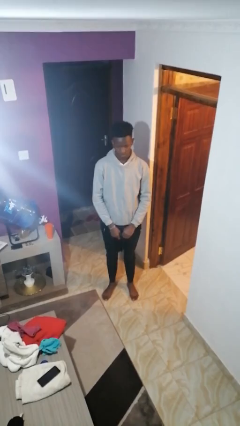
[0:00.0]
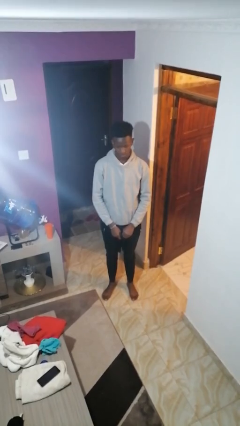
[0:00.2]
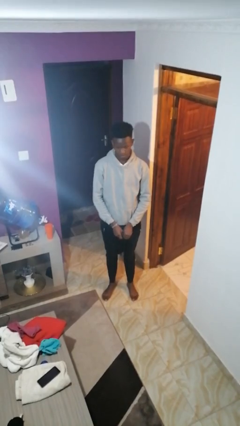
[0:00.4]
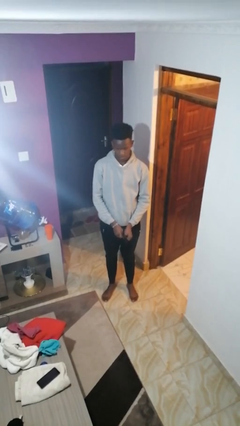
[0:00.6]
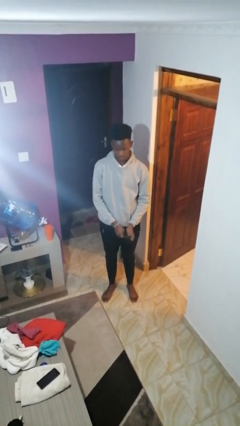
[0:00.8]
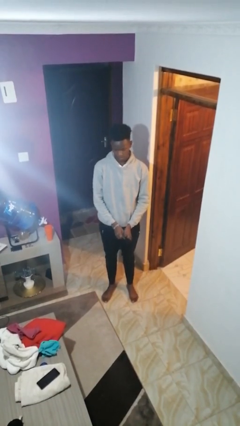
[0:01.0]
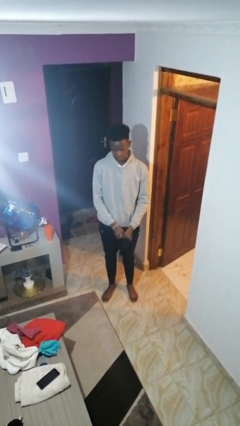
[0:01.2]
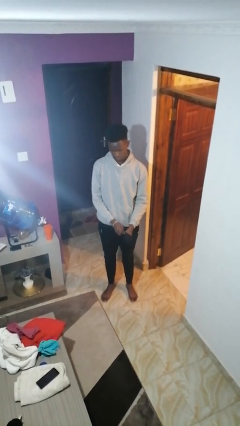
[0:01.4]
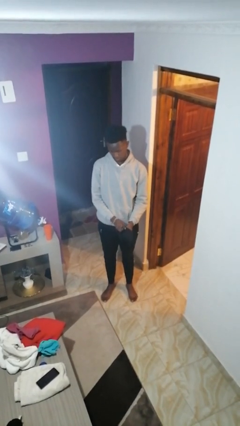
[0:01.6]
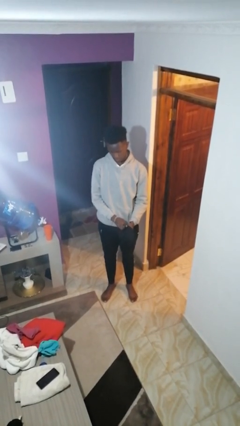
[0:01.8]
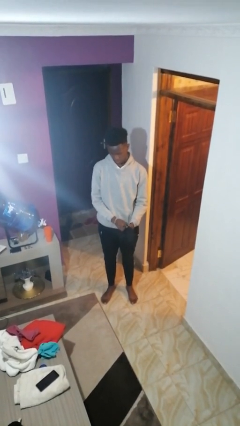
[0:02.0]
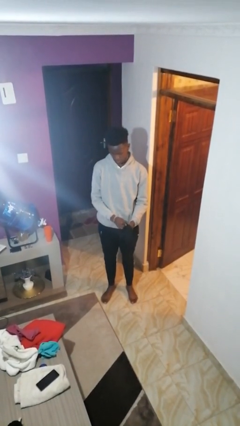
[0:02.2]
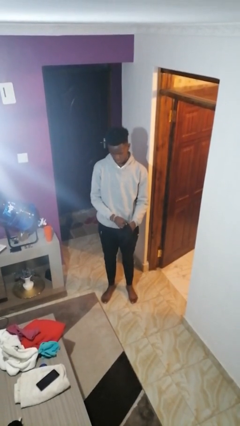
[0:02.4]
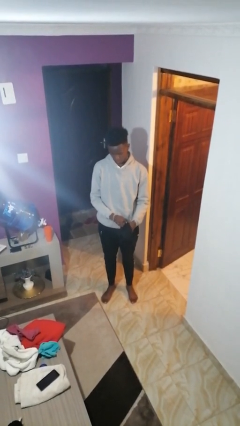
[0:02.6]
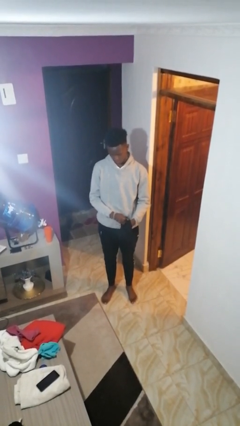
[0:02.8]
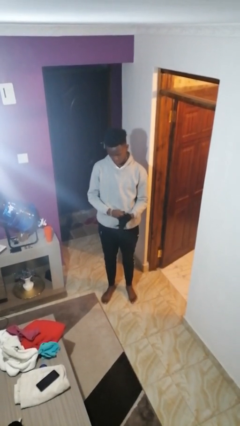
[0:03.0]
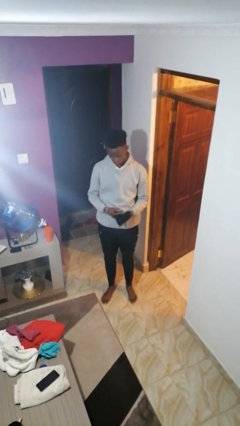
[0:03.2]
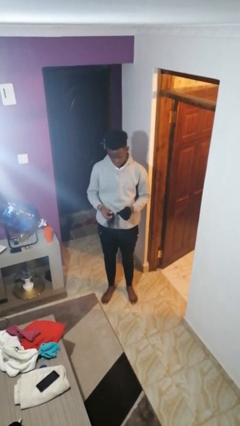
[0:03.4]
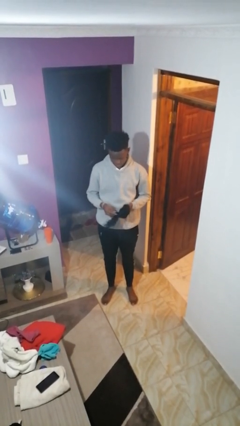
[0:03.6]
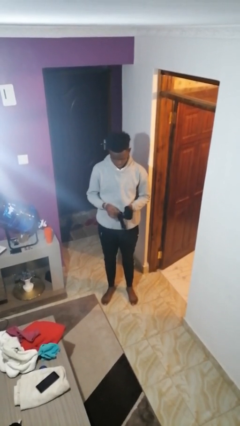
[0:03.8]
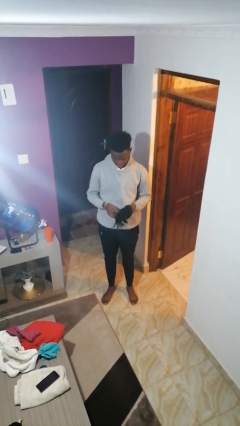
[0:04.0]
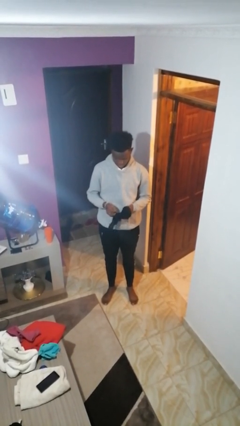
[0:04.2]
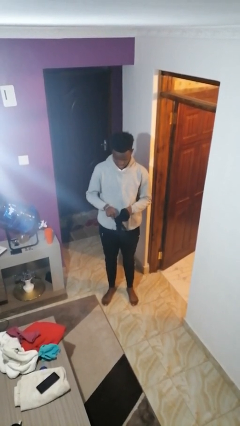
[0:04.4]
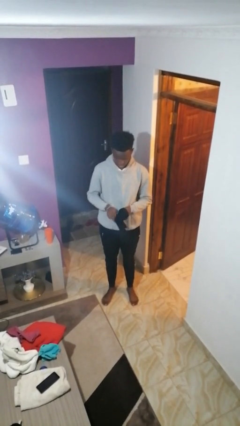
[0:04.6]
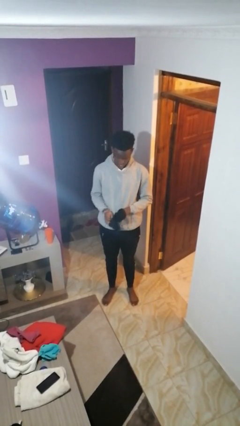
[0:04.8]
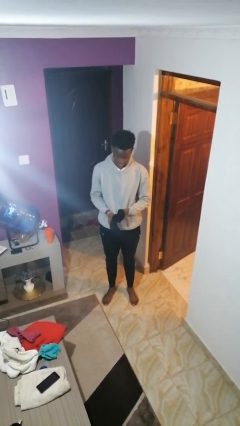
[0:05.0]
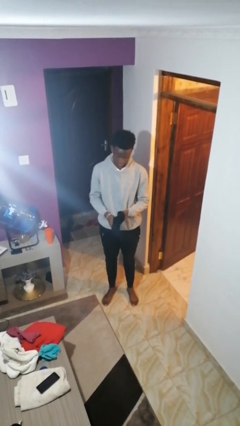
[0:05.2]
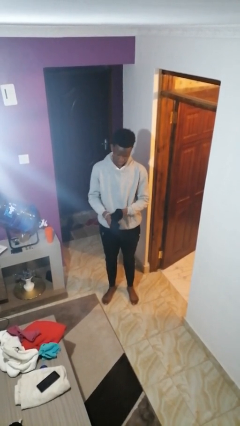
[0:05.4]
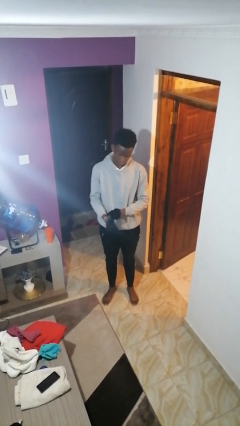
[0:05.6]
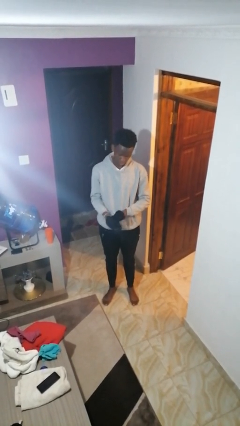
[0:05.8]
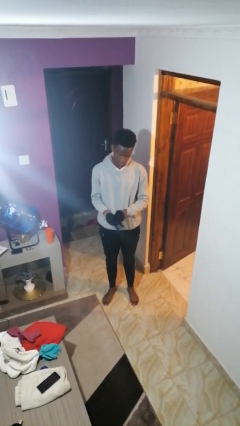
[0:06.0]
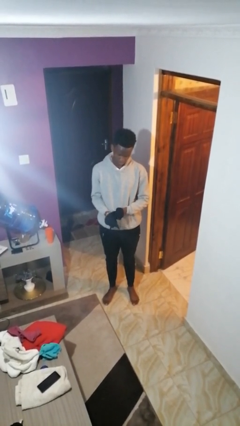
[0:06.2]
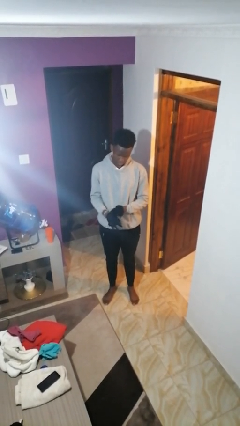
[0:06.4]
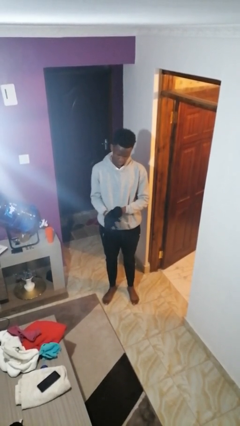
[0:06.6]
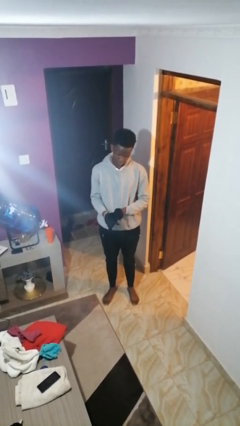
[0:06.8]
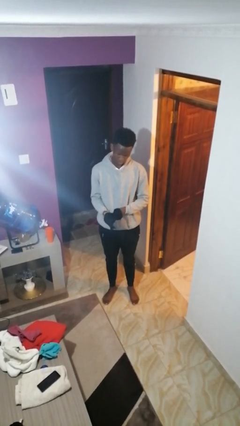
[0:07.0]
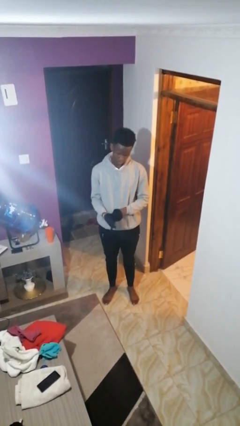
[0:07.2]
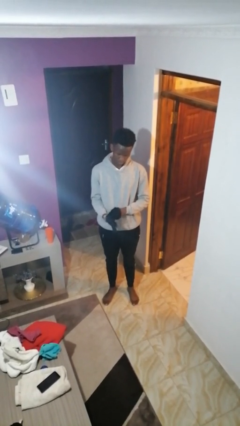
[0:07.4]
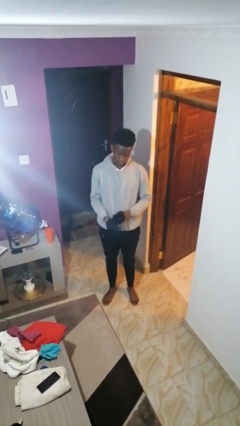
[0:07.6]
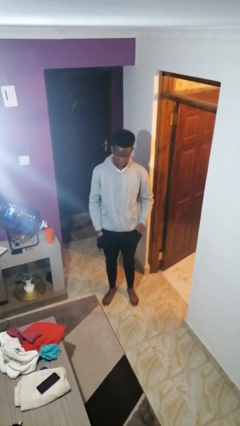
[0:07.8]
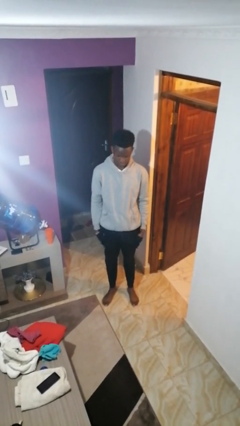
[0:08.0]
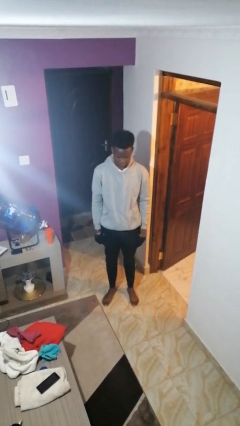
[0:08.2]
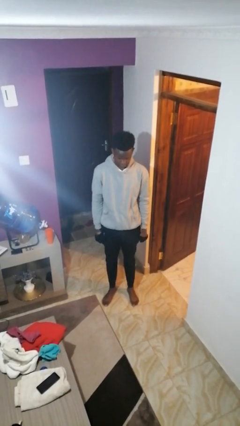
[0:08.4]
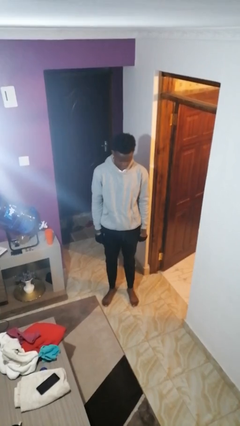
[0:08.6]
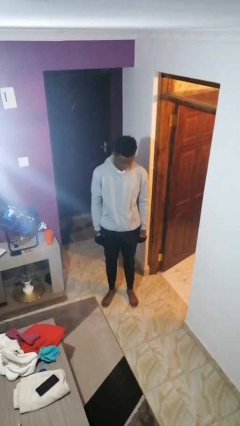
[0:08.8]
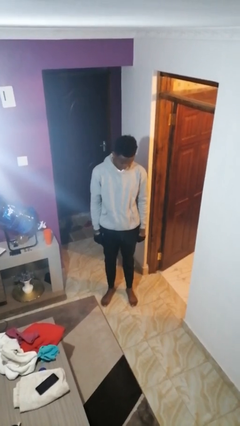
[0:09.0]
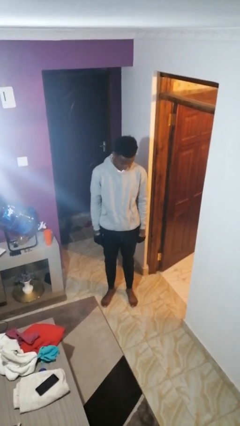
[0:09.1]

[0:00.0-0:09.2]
person puts on gloves

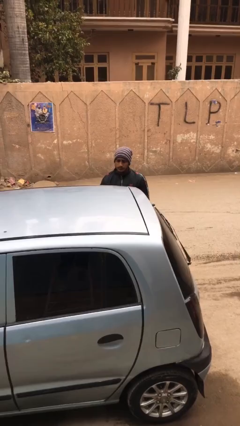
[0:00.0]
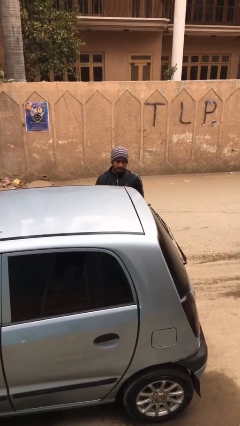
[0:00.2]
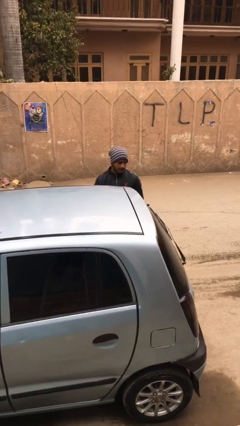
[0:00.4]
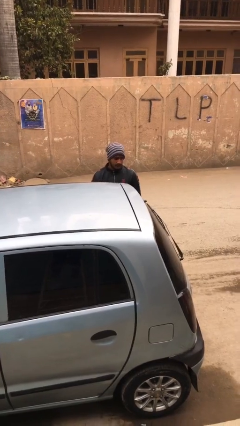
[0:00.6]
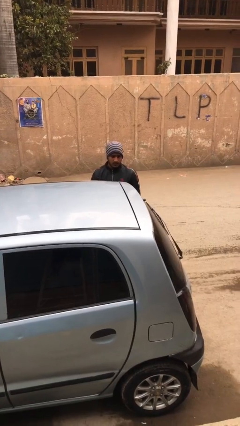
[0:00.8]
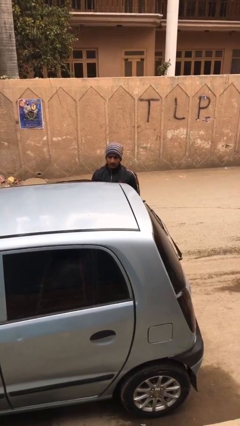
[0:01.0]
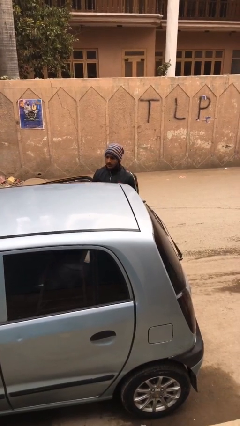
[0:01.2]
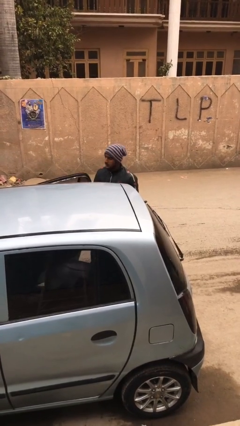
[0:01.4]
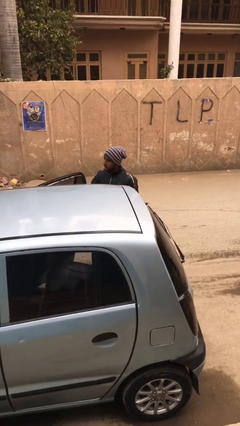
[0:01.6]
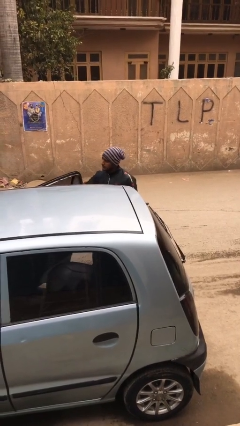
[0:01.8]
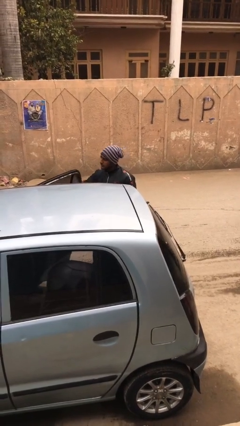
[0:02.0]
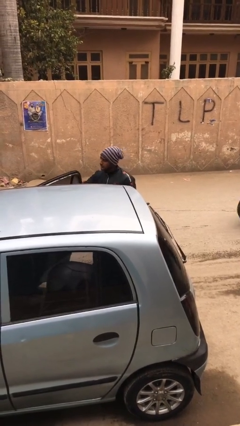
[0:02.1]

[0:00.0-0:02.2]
person opens car door

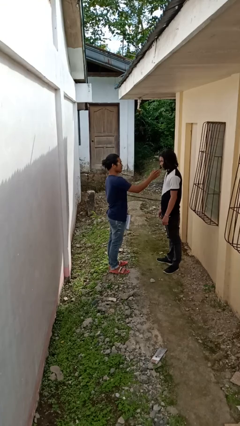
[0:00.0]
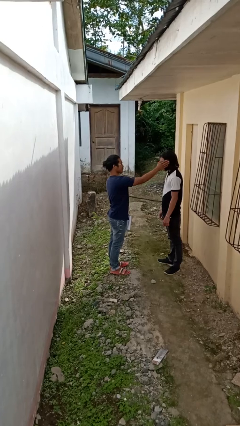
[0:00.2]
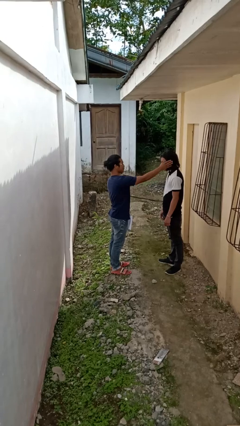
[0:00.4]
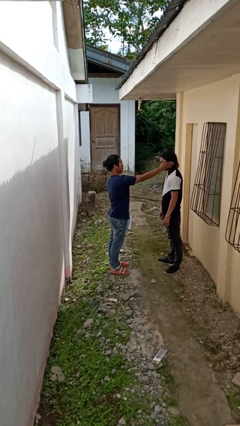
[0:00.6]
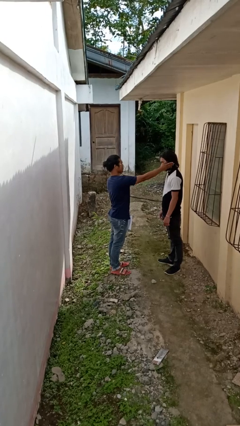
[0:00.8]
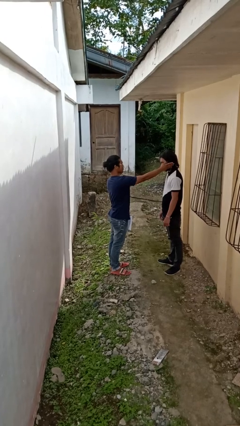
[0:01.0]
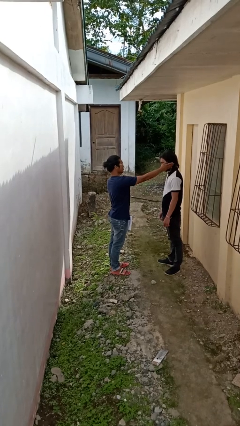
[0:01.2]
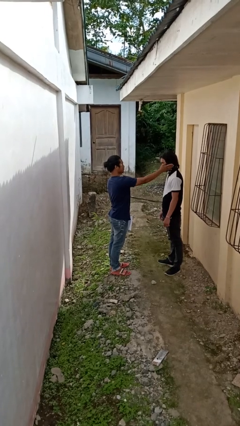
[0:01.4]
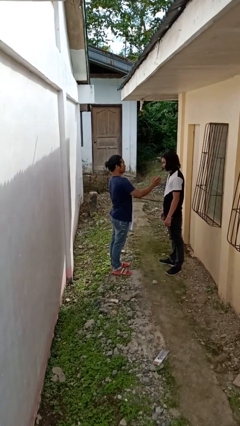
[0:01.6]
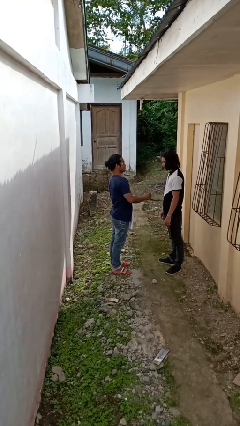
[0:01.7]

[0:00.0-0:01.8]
person touches face of person

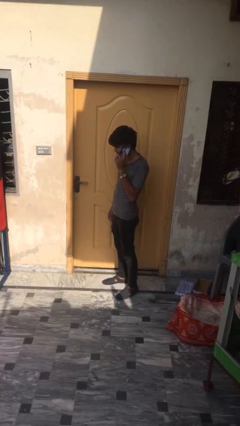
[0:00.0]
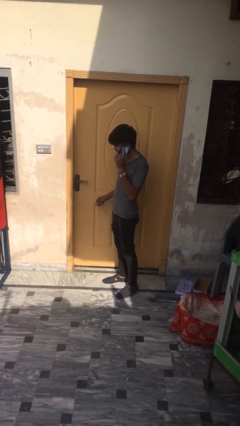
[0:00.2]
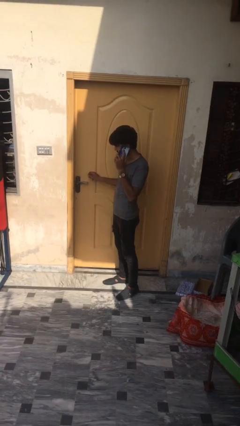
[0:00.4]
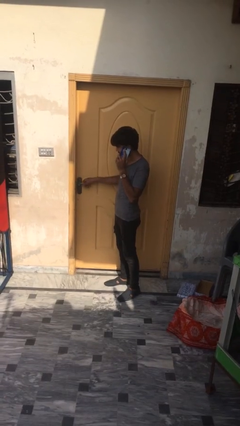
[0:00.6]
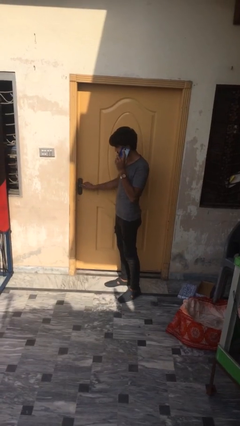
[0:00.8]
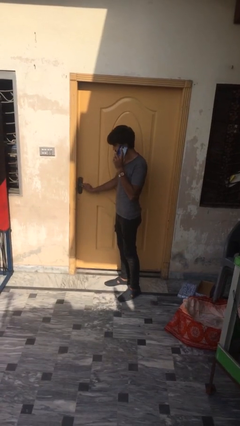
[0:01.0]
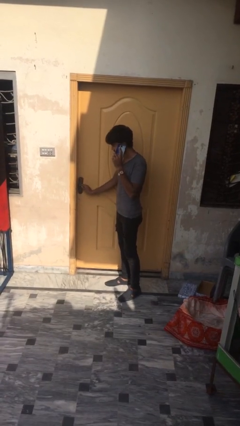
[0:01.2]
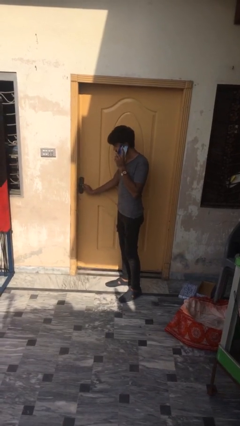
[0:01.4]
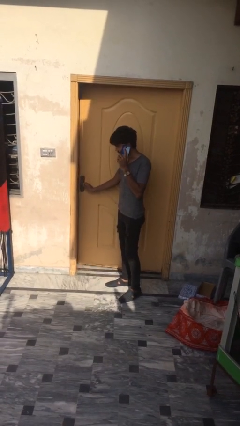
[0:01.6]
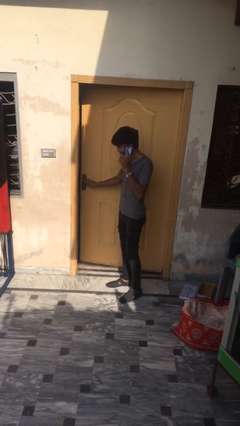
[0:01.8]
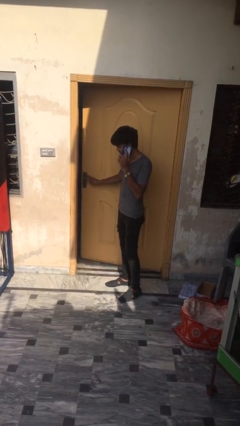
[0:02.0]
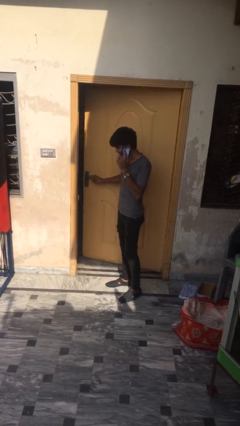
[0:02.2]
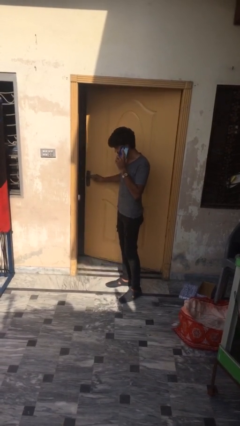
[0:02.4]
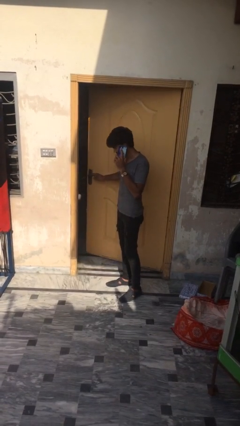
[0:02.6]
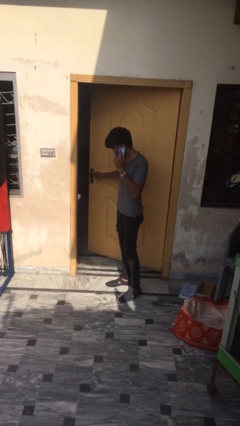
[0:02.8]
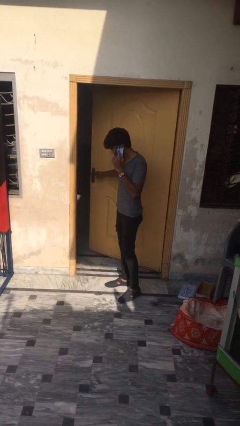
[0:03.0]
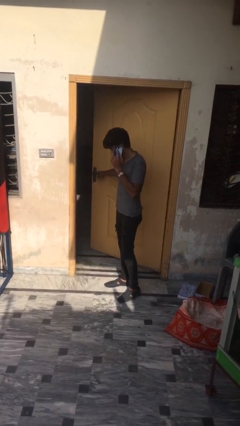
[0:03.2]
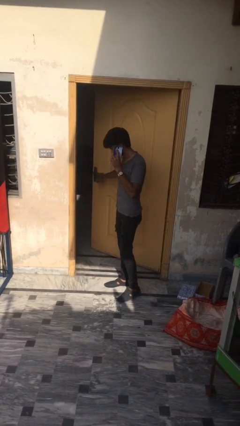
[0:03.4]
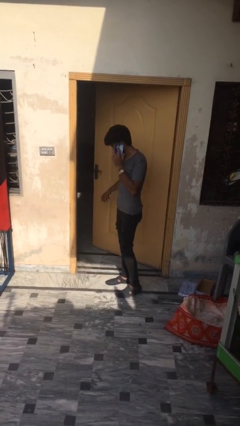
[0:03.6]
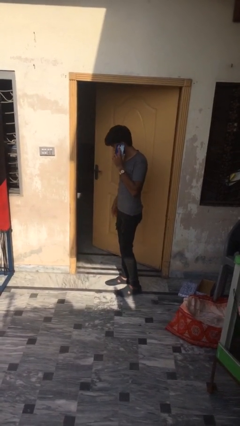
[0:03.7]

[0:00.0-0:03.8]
person opens facility door

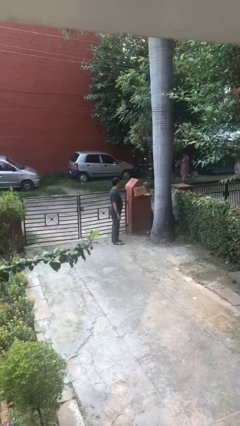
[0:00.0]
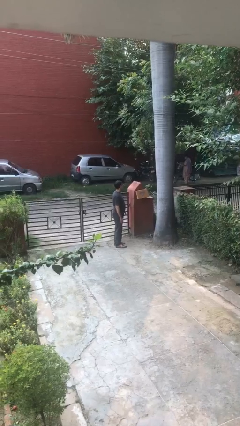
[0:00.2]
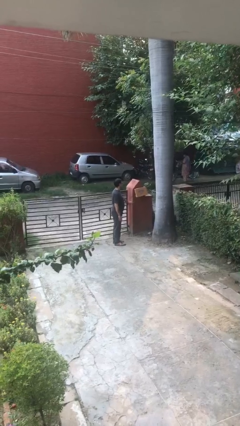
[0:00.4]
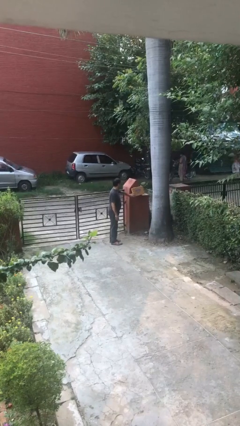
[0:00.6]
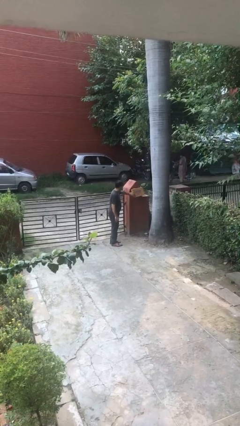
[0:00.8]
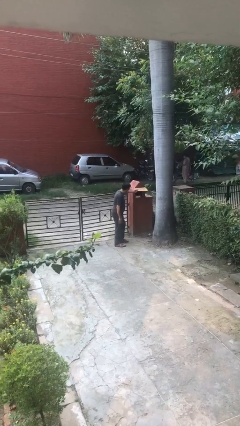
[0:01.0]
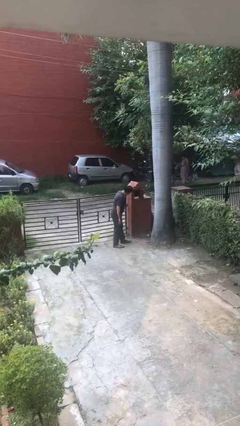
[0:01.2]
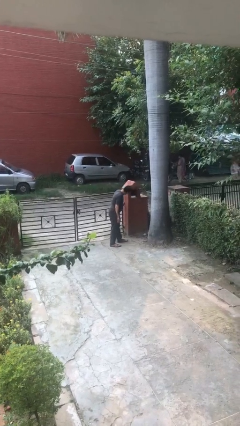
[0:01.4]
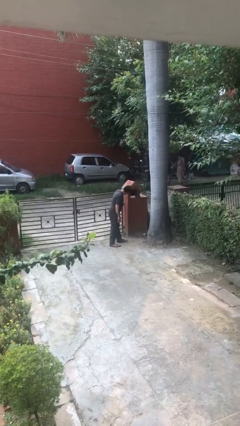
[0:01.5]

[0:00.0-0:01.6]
person opens mailbox
